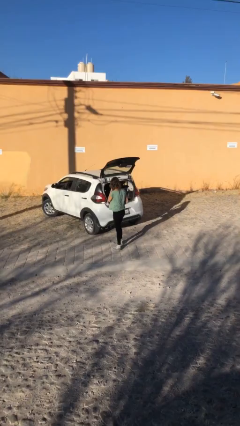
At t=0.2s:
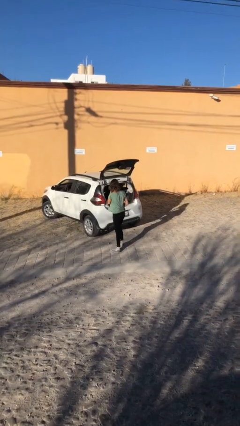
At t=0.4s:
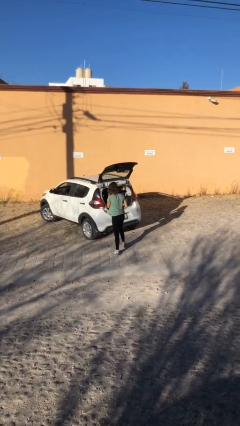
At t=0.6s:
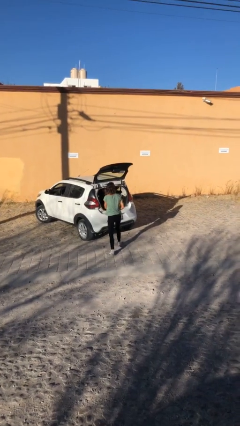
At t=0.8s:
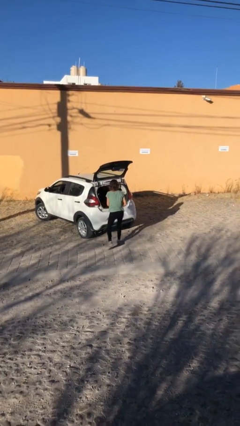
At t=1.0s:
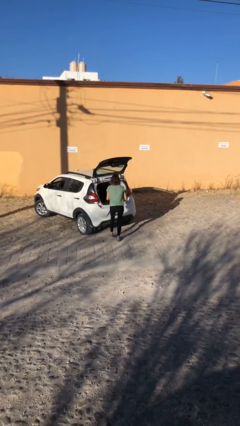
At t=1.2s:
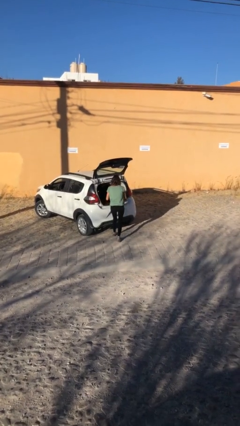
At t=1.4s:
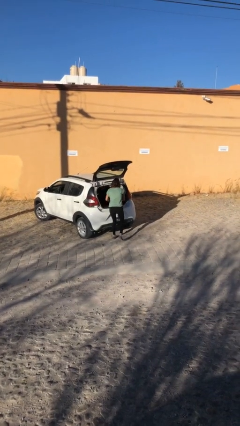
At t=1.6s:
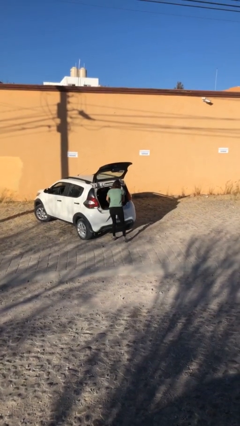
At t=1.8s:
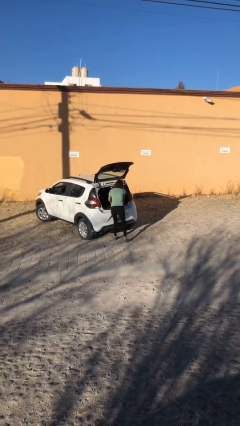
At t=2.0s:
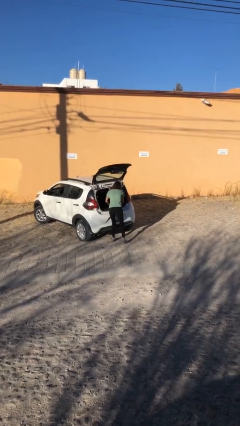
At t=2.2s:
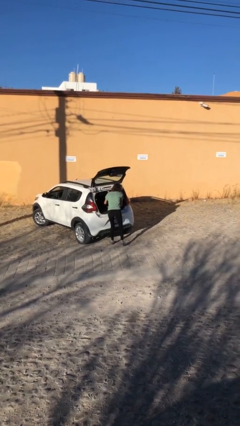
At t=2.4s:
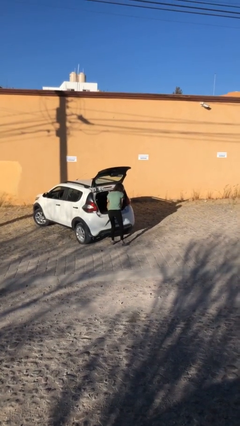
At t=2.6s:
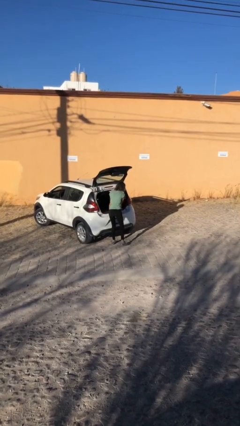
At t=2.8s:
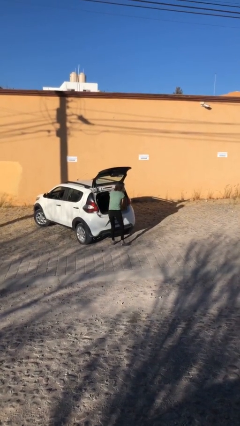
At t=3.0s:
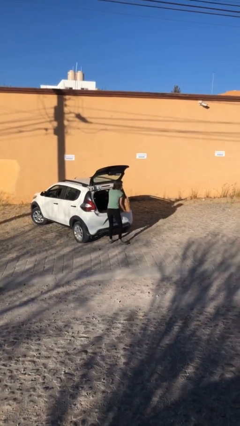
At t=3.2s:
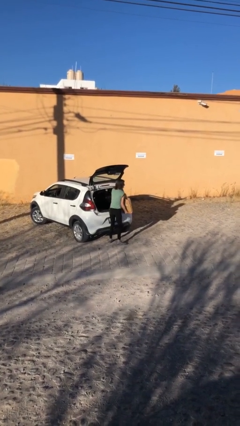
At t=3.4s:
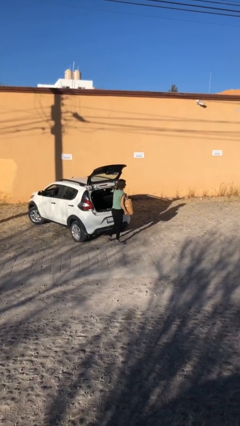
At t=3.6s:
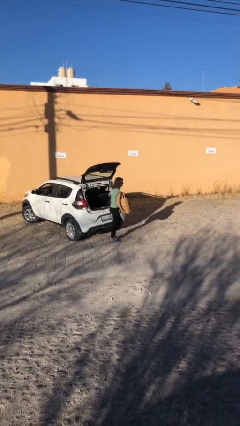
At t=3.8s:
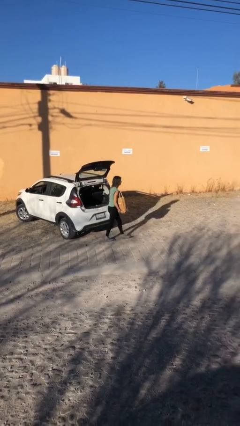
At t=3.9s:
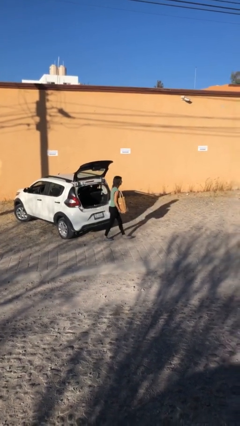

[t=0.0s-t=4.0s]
person unloads car

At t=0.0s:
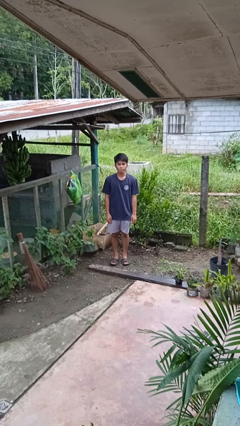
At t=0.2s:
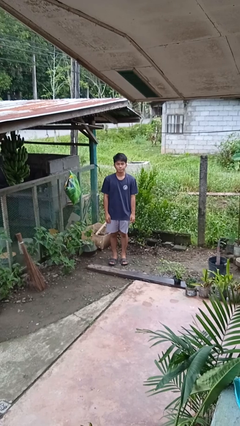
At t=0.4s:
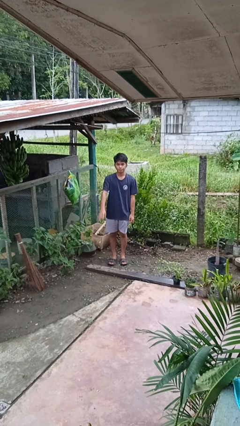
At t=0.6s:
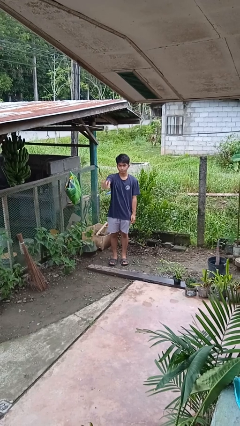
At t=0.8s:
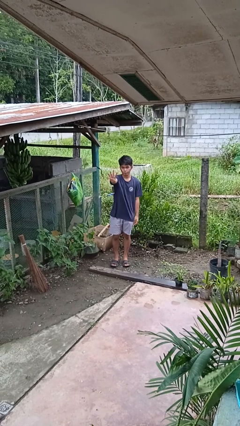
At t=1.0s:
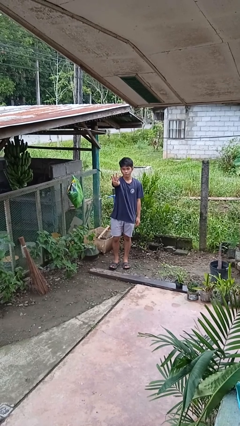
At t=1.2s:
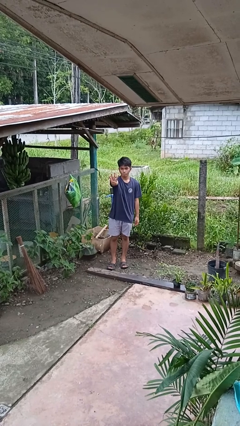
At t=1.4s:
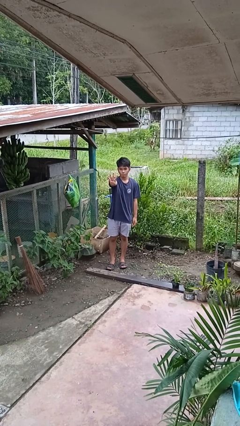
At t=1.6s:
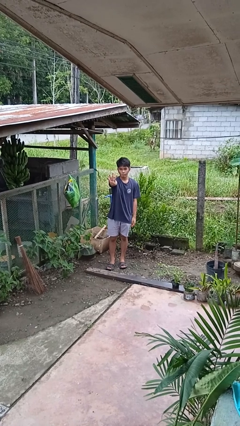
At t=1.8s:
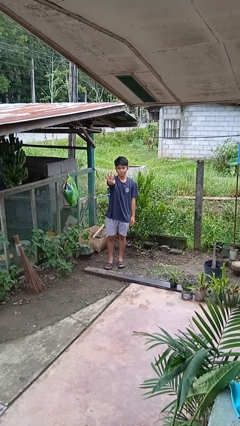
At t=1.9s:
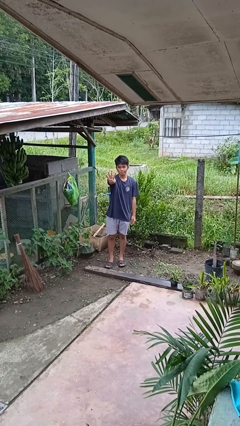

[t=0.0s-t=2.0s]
person gestures number four

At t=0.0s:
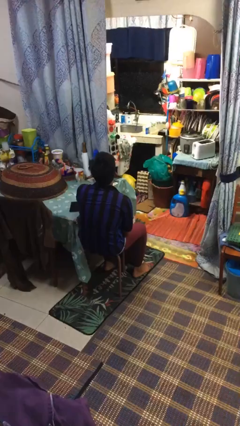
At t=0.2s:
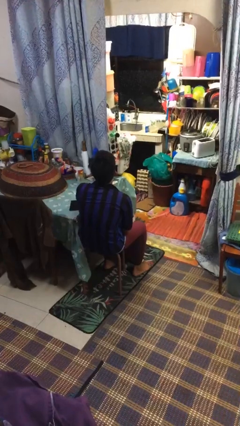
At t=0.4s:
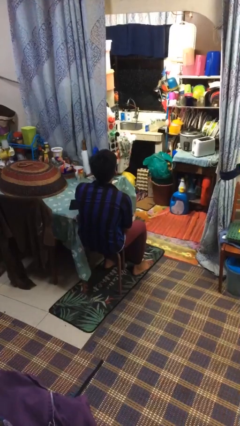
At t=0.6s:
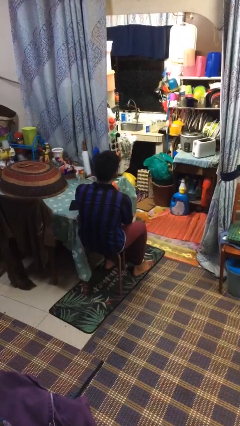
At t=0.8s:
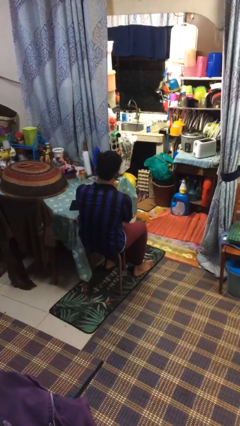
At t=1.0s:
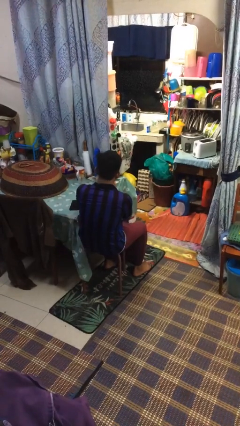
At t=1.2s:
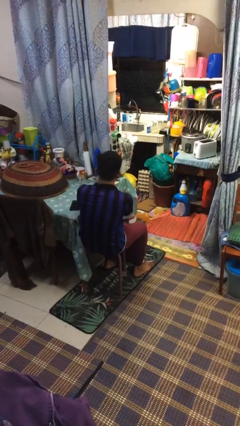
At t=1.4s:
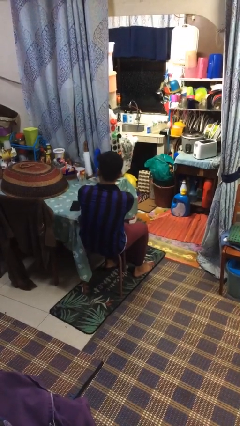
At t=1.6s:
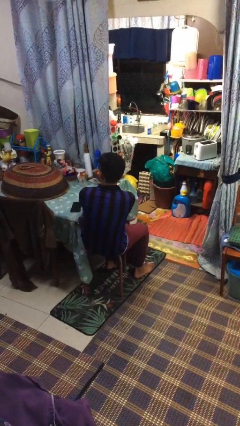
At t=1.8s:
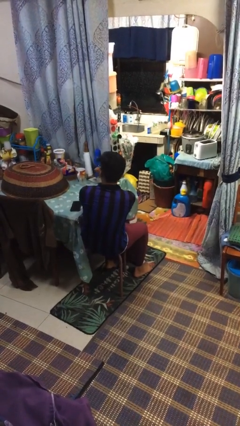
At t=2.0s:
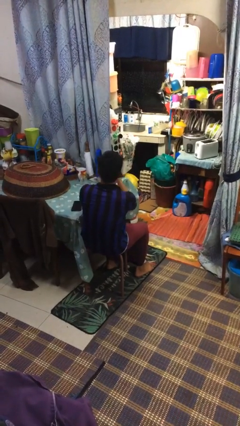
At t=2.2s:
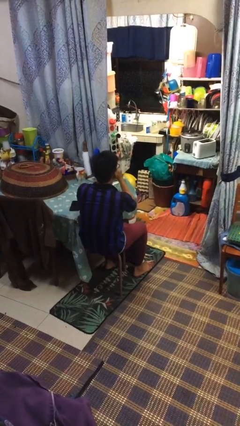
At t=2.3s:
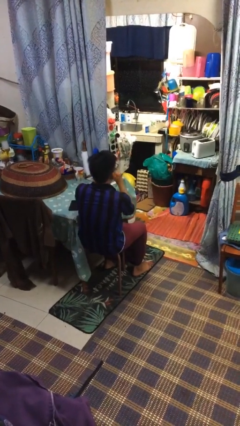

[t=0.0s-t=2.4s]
person vapes

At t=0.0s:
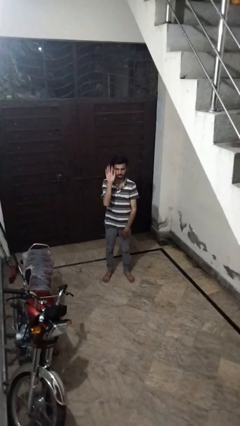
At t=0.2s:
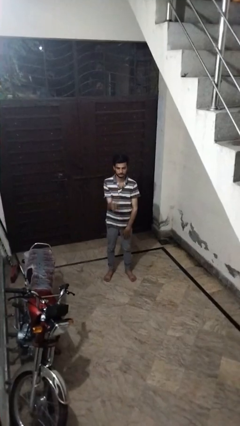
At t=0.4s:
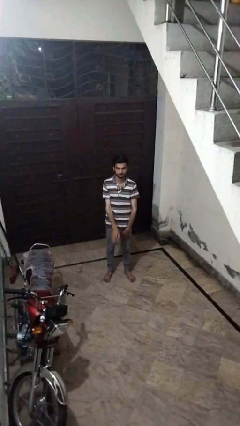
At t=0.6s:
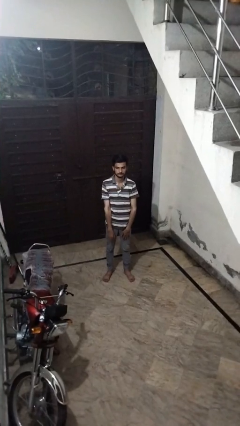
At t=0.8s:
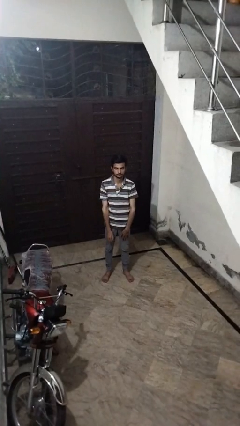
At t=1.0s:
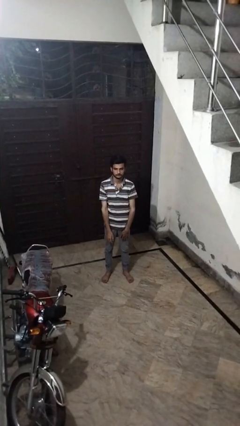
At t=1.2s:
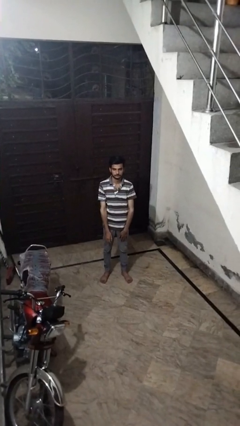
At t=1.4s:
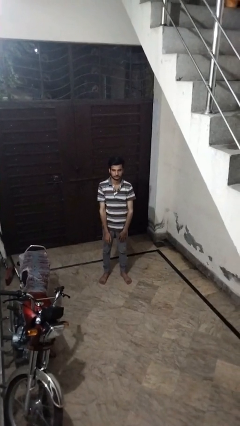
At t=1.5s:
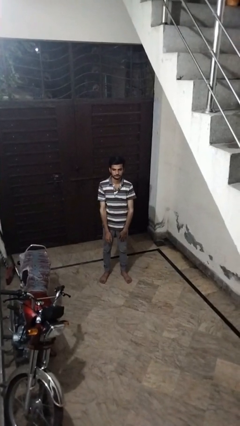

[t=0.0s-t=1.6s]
person gestures lower hand

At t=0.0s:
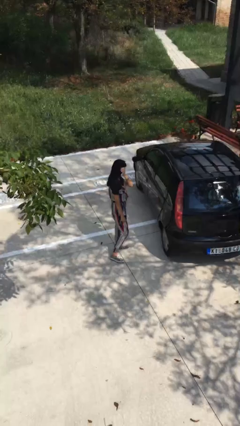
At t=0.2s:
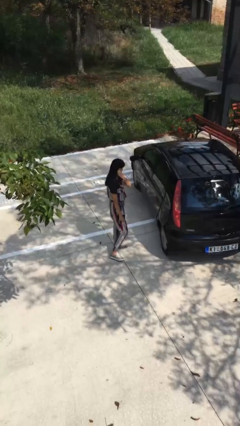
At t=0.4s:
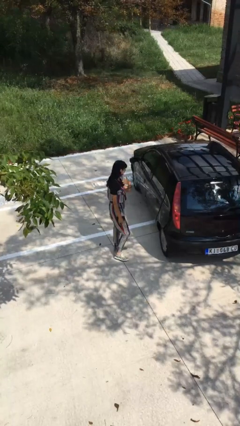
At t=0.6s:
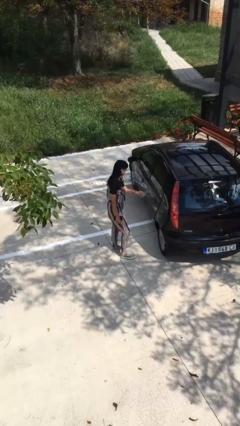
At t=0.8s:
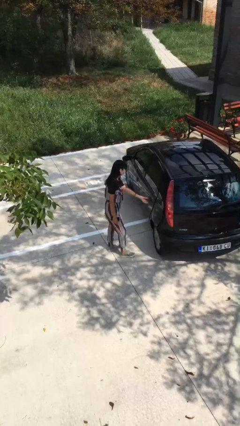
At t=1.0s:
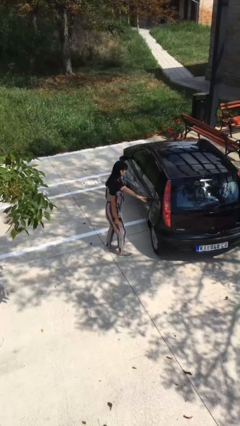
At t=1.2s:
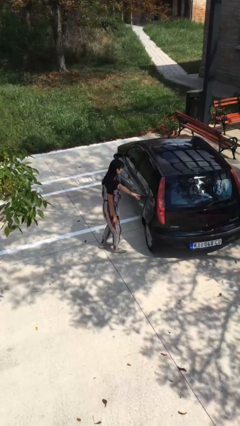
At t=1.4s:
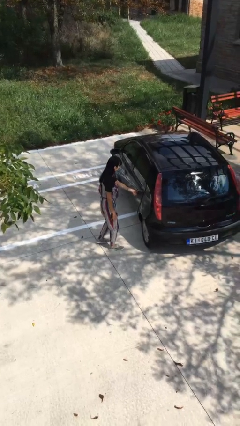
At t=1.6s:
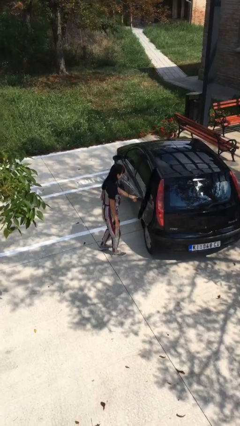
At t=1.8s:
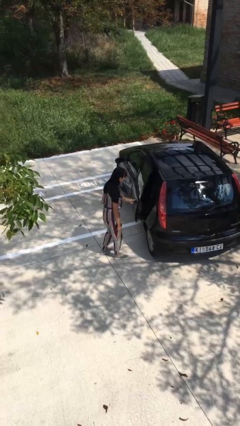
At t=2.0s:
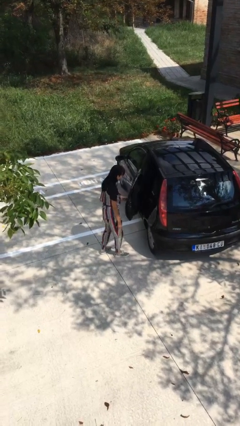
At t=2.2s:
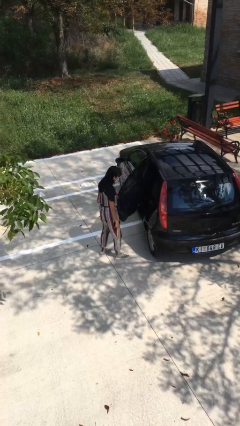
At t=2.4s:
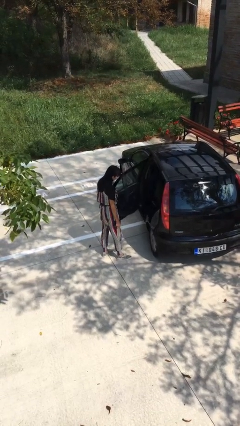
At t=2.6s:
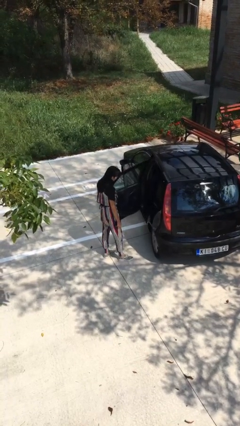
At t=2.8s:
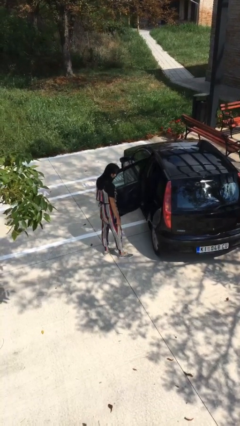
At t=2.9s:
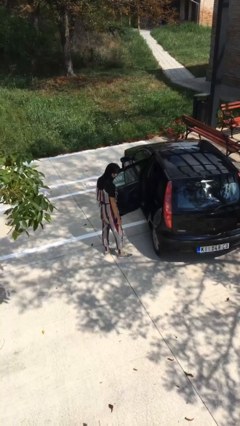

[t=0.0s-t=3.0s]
person opens car door

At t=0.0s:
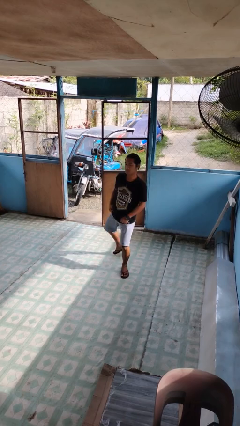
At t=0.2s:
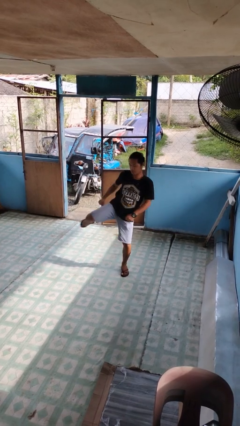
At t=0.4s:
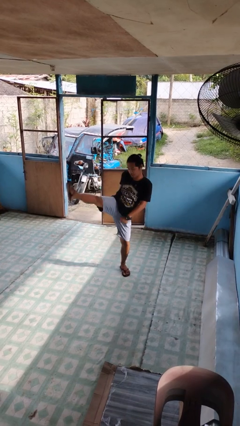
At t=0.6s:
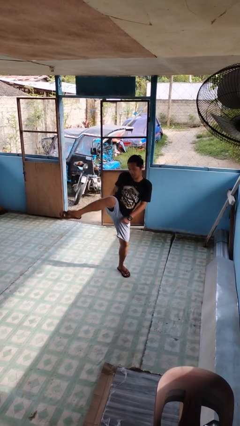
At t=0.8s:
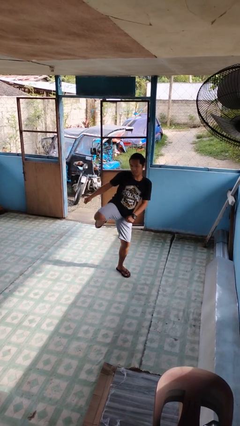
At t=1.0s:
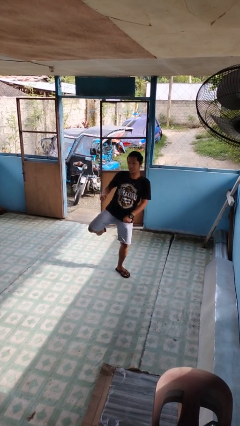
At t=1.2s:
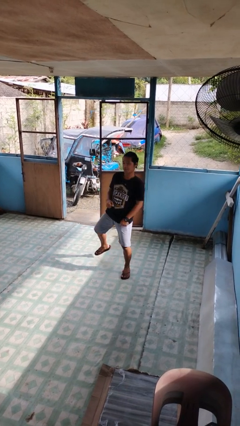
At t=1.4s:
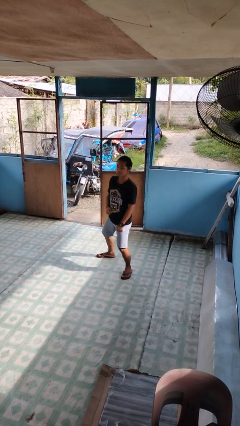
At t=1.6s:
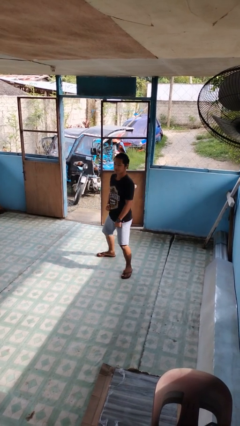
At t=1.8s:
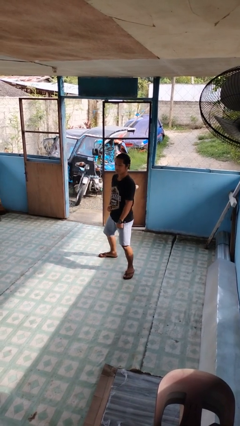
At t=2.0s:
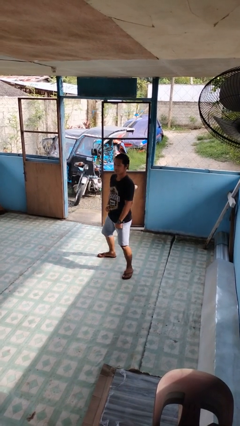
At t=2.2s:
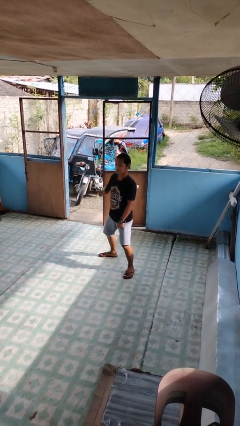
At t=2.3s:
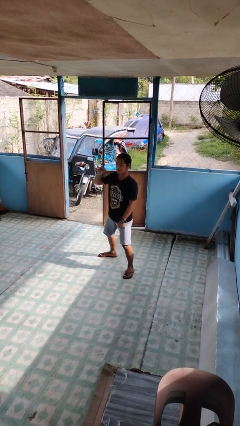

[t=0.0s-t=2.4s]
person karate kicks

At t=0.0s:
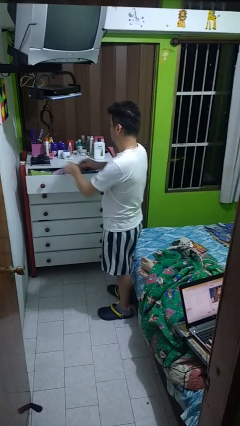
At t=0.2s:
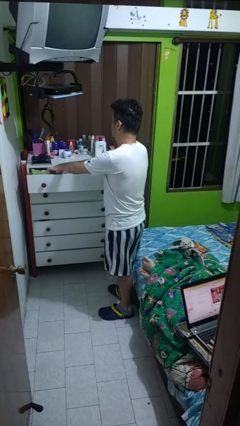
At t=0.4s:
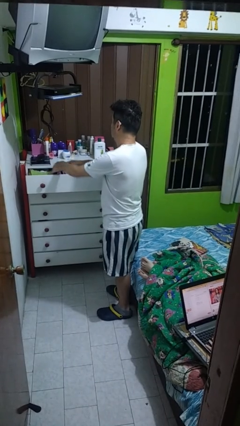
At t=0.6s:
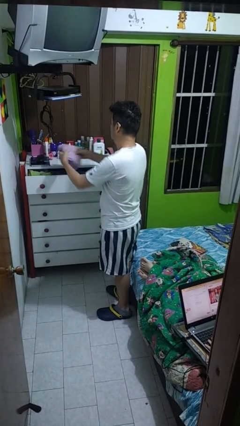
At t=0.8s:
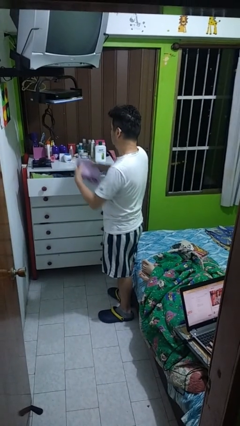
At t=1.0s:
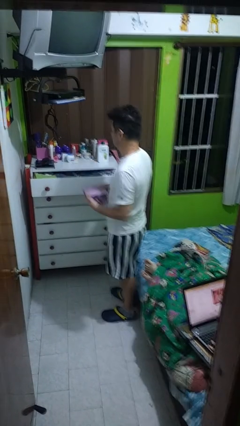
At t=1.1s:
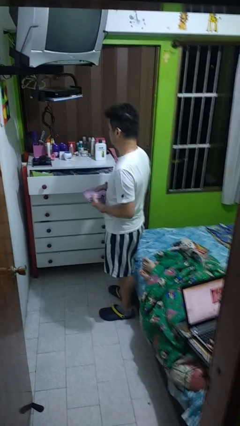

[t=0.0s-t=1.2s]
person takes clothes from dresser

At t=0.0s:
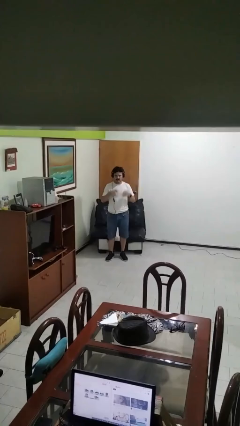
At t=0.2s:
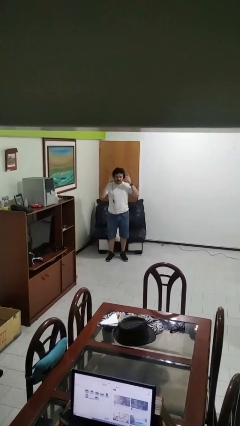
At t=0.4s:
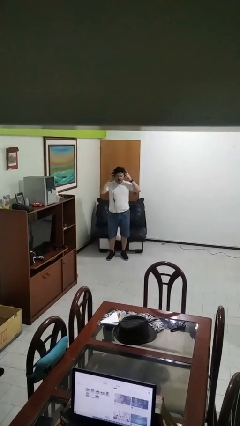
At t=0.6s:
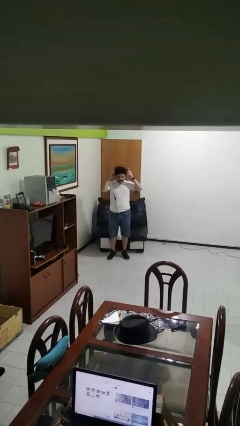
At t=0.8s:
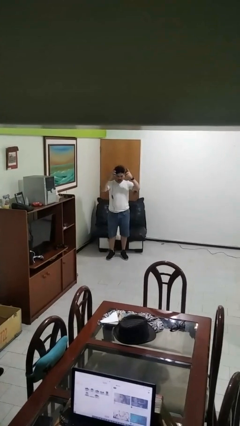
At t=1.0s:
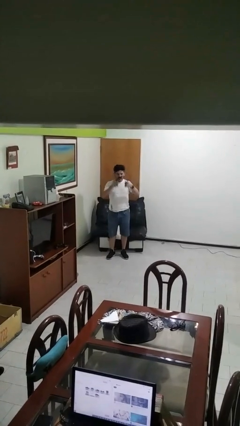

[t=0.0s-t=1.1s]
person takes off headphones
